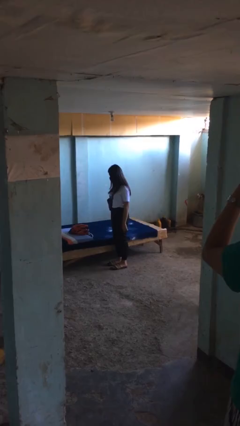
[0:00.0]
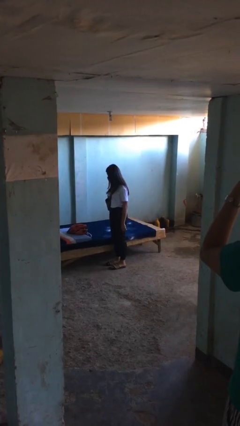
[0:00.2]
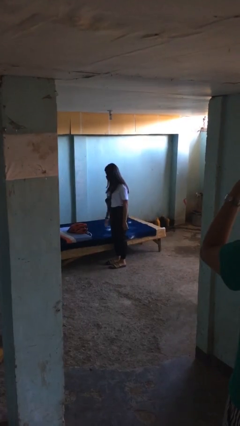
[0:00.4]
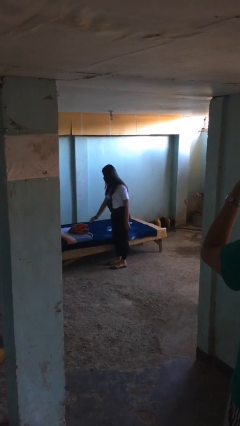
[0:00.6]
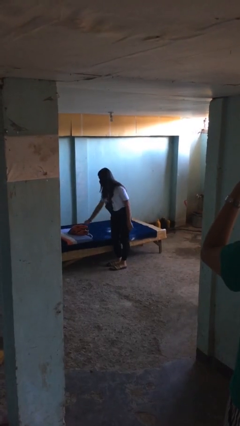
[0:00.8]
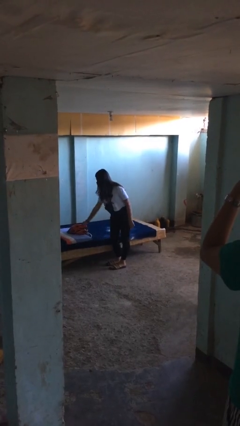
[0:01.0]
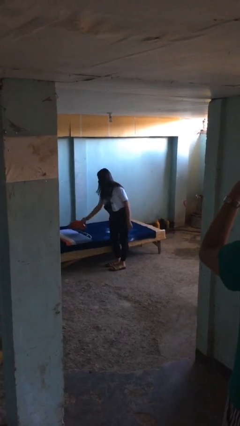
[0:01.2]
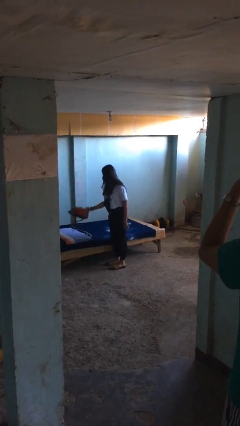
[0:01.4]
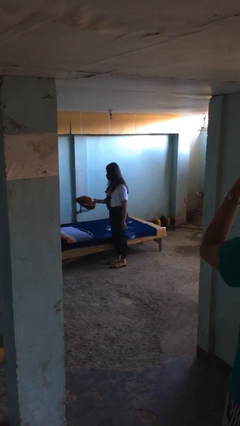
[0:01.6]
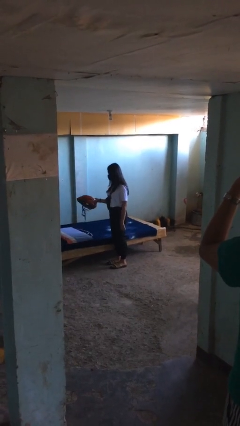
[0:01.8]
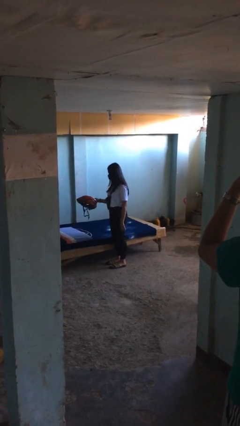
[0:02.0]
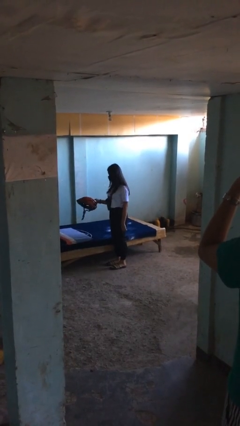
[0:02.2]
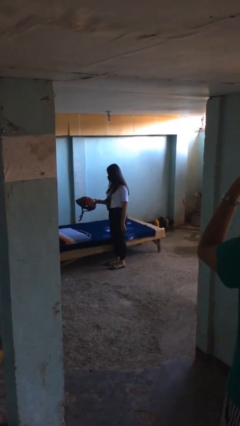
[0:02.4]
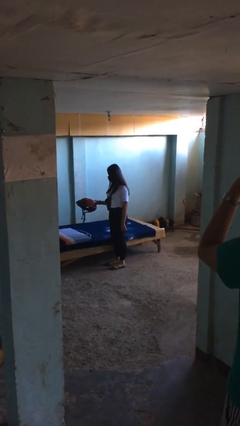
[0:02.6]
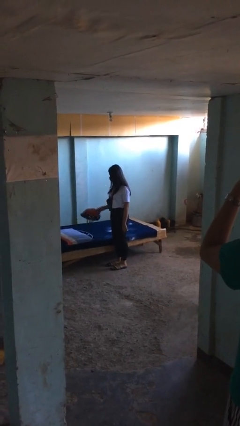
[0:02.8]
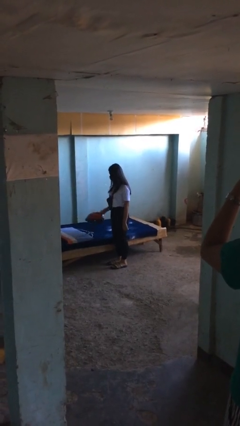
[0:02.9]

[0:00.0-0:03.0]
person picks up object from bed

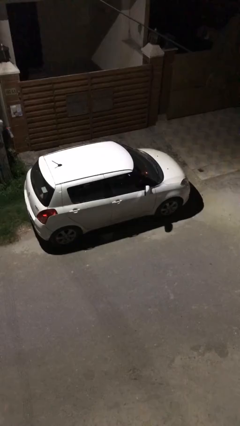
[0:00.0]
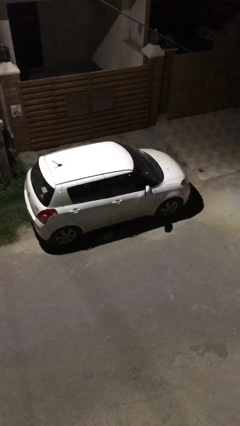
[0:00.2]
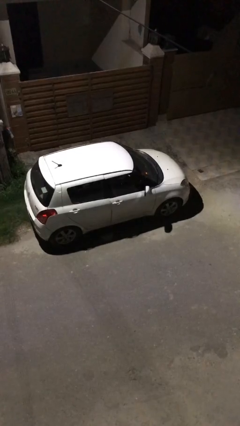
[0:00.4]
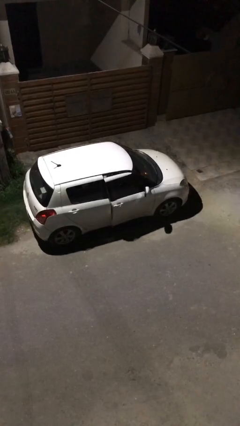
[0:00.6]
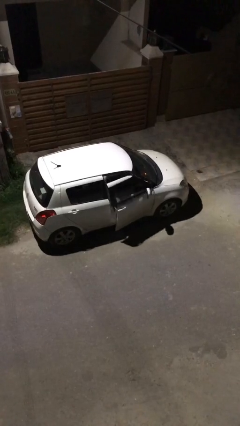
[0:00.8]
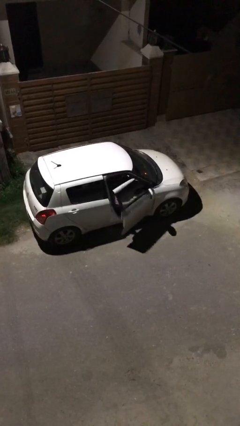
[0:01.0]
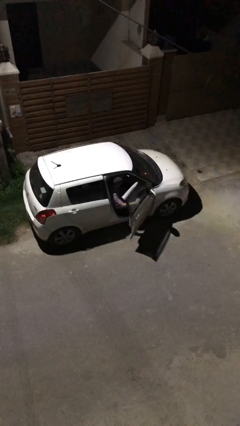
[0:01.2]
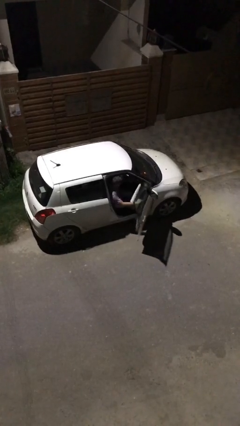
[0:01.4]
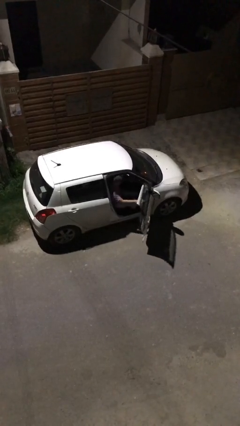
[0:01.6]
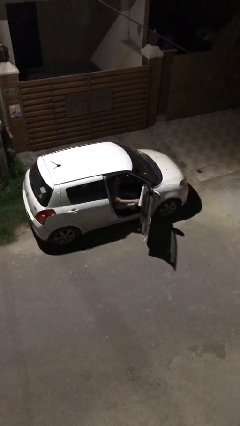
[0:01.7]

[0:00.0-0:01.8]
person opens car door

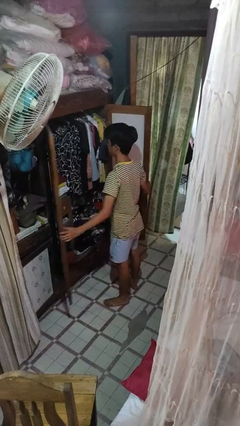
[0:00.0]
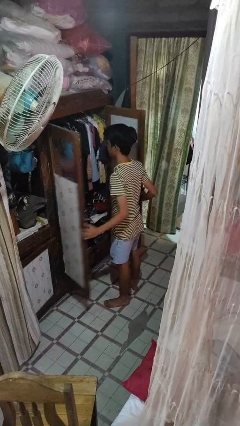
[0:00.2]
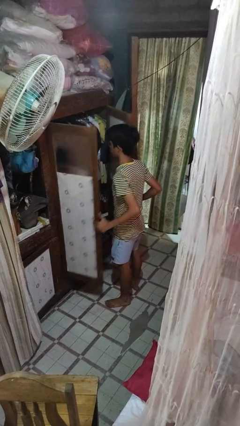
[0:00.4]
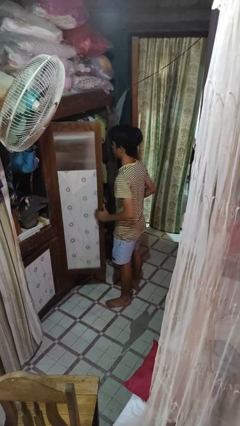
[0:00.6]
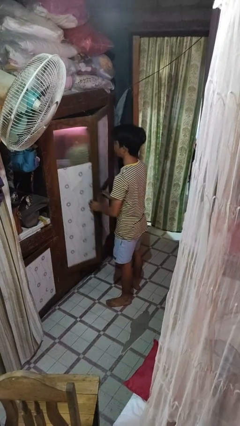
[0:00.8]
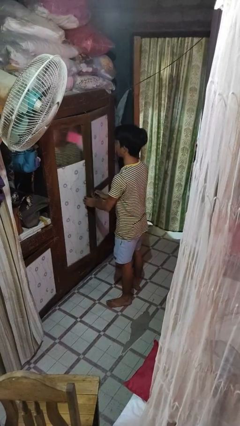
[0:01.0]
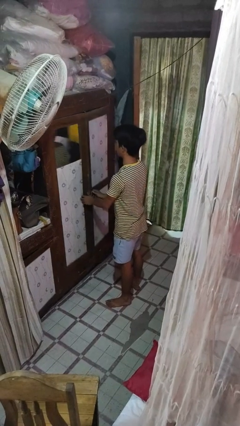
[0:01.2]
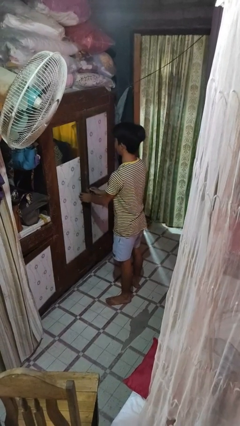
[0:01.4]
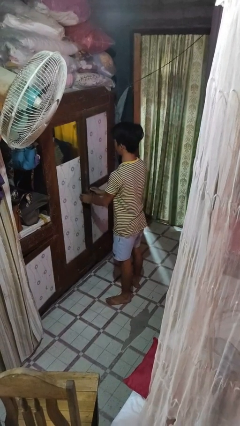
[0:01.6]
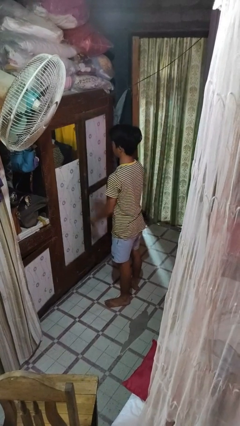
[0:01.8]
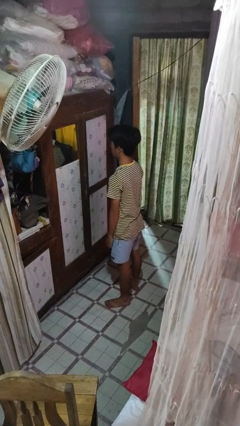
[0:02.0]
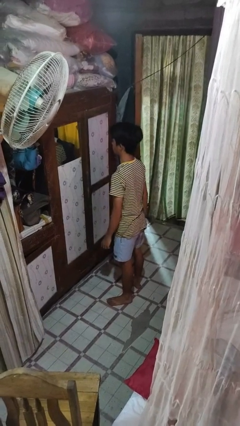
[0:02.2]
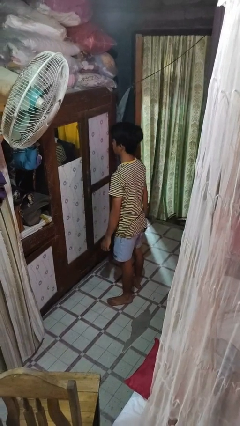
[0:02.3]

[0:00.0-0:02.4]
person closes closet door

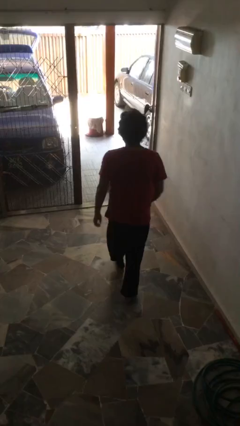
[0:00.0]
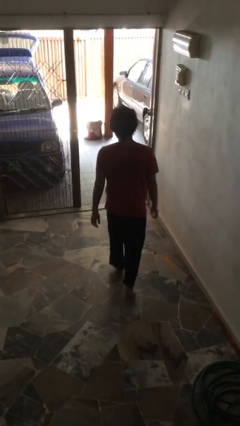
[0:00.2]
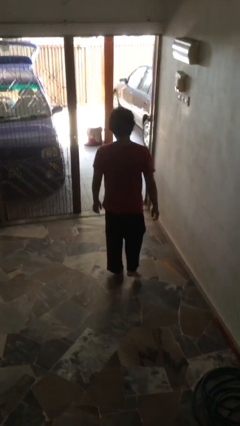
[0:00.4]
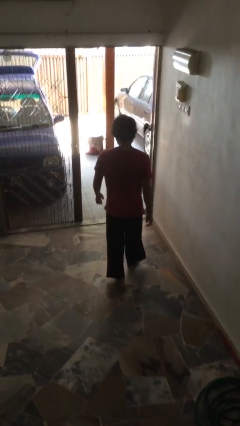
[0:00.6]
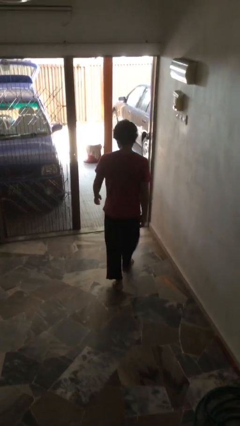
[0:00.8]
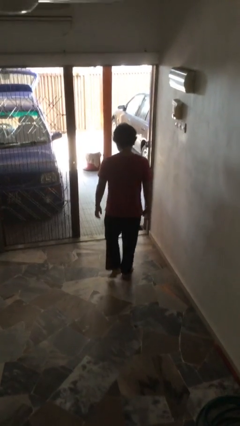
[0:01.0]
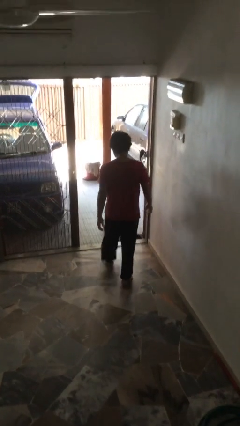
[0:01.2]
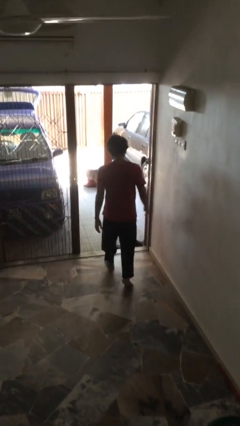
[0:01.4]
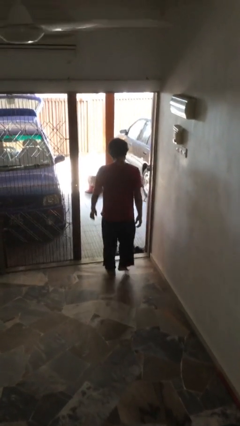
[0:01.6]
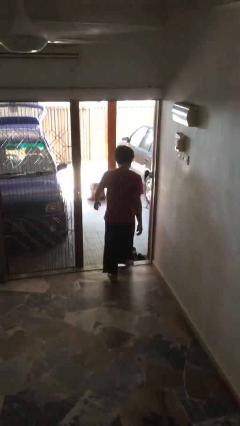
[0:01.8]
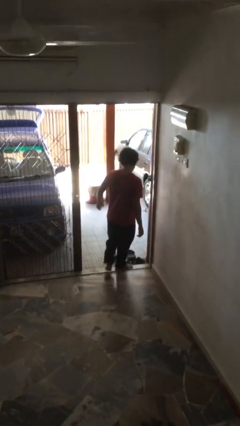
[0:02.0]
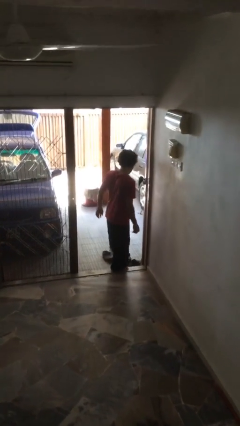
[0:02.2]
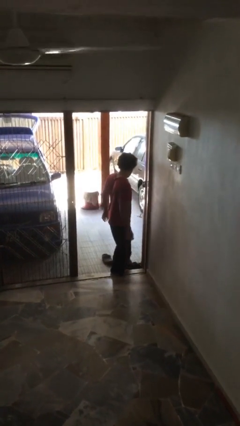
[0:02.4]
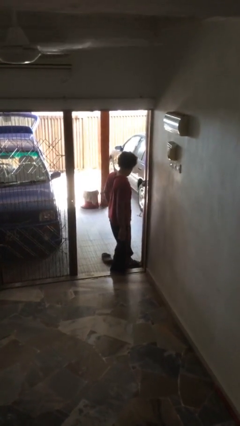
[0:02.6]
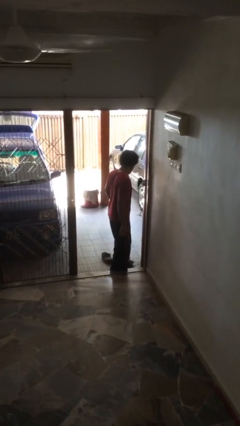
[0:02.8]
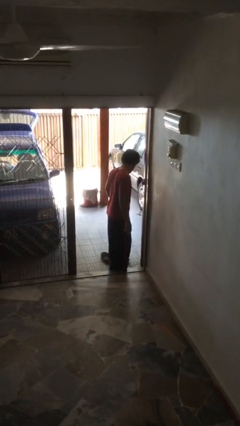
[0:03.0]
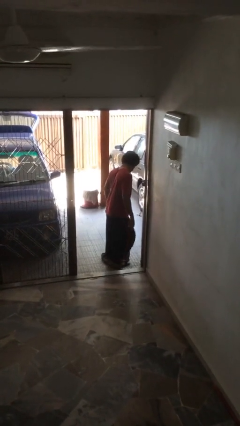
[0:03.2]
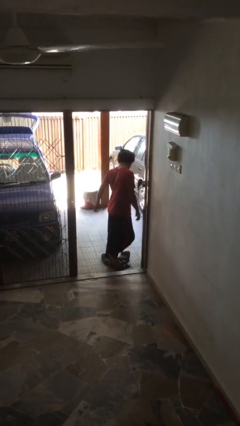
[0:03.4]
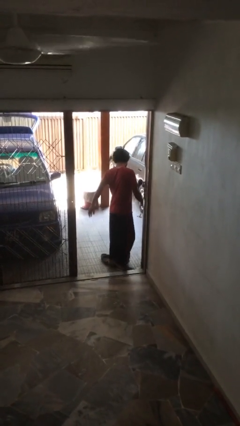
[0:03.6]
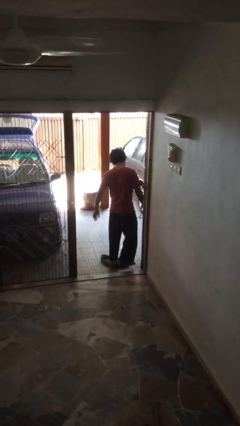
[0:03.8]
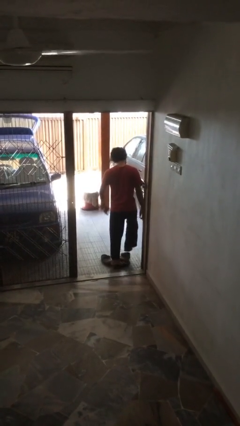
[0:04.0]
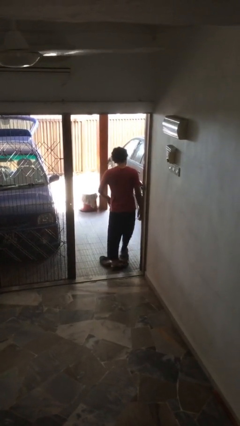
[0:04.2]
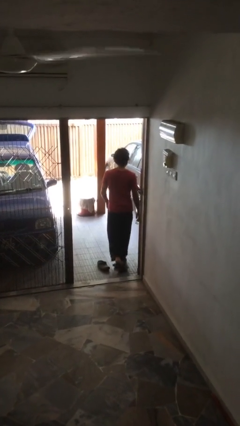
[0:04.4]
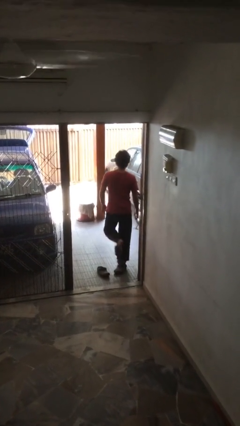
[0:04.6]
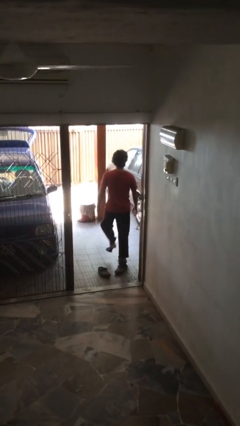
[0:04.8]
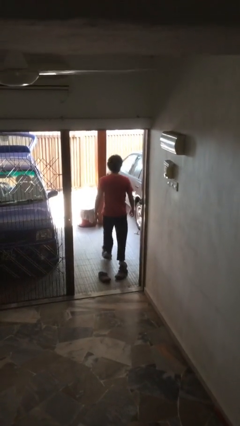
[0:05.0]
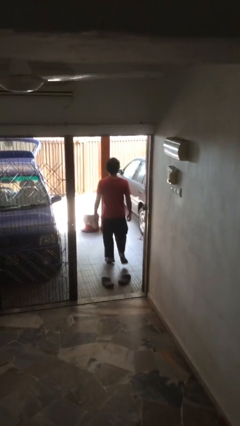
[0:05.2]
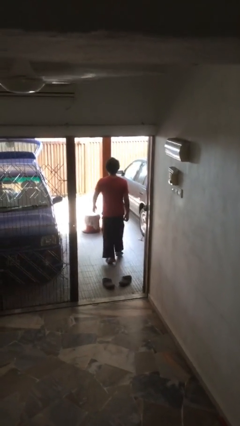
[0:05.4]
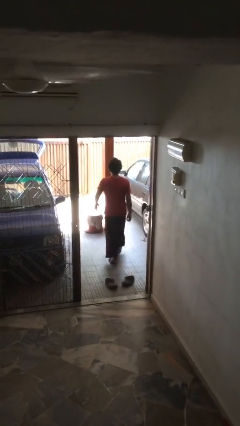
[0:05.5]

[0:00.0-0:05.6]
person exits scene through structure

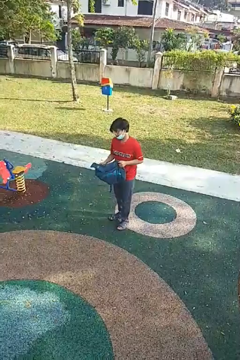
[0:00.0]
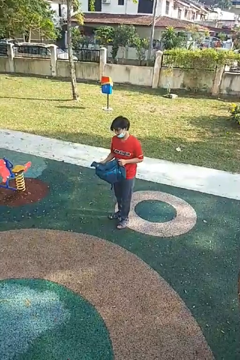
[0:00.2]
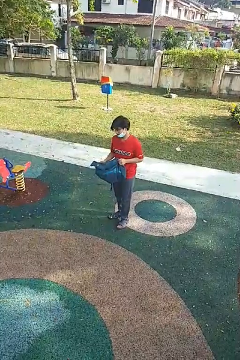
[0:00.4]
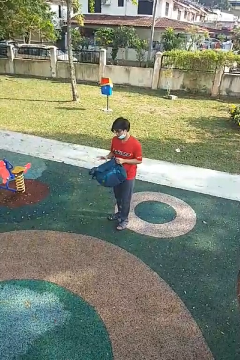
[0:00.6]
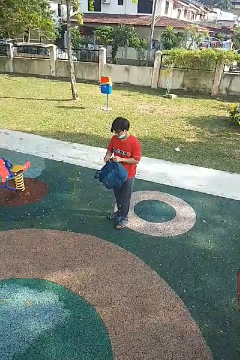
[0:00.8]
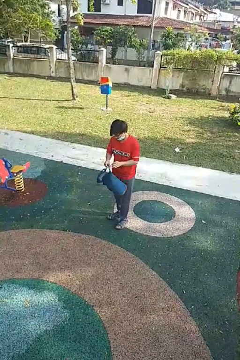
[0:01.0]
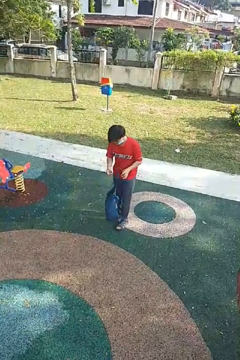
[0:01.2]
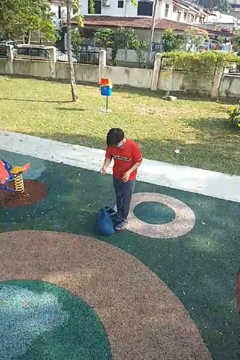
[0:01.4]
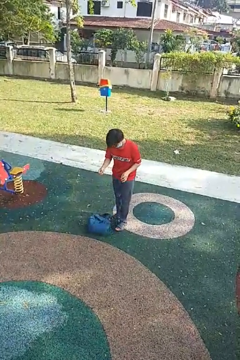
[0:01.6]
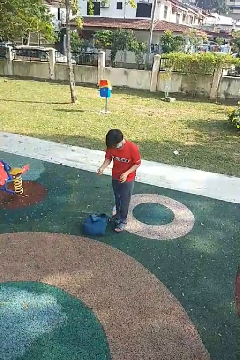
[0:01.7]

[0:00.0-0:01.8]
person drops object

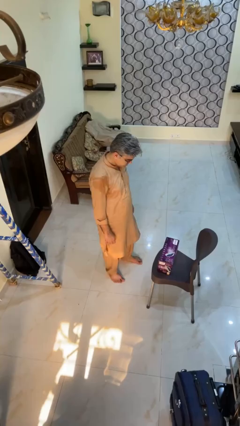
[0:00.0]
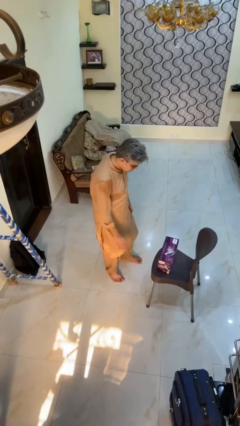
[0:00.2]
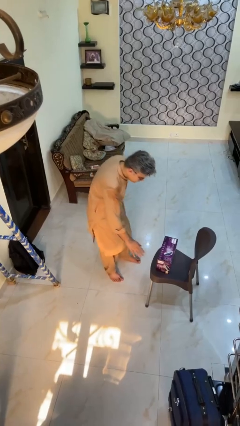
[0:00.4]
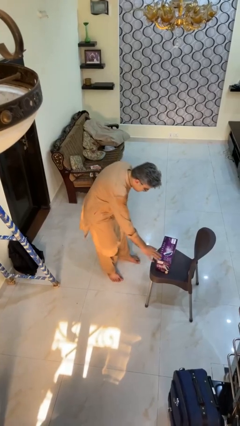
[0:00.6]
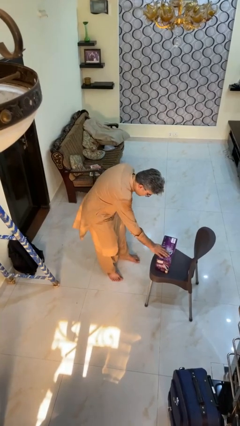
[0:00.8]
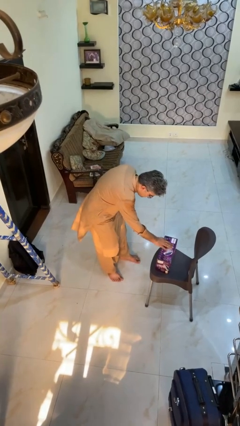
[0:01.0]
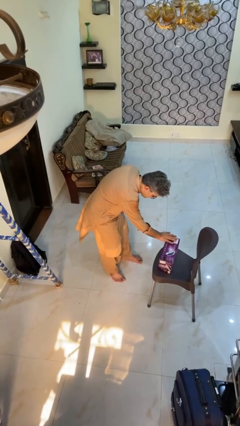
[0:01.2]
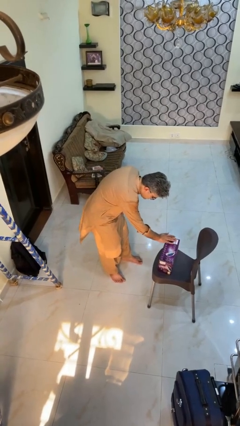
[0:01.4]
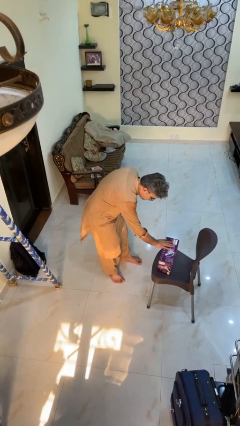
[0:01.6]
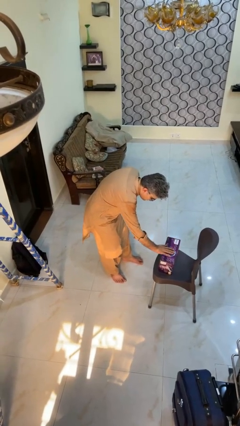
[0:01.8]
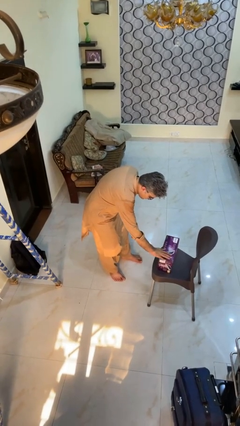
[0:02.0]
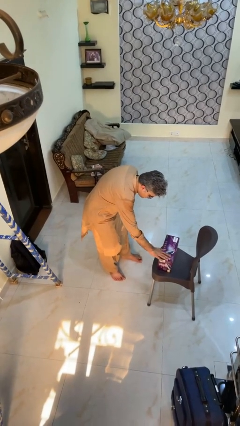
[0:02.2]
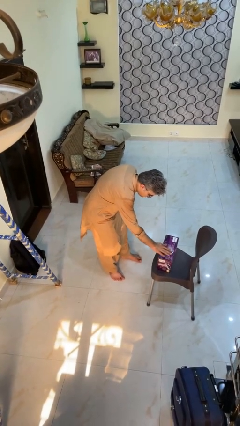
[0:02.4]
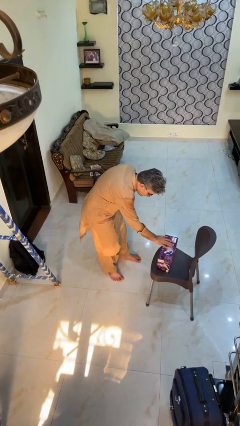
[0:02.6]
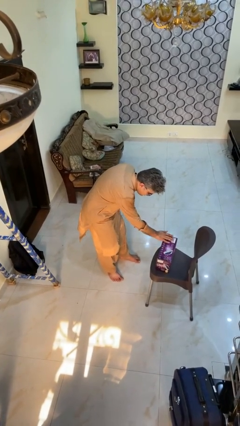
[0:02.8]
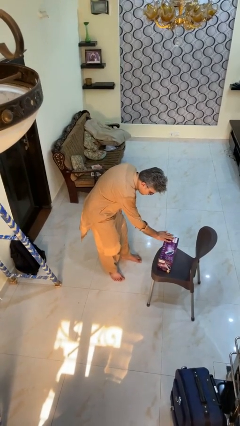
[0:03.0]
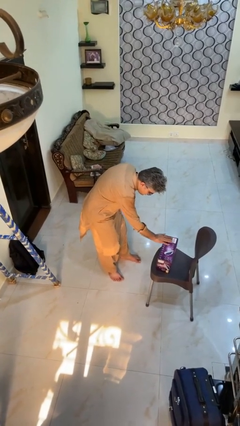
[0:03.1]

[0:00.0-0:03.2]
person waves hand over object
